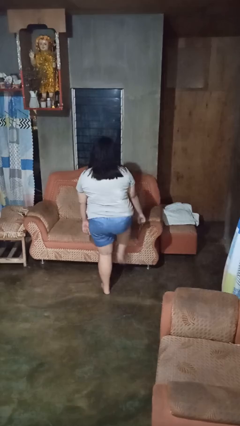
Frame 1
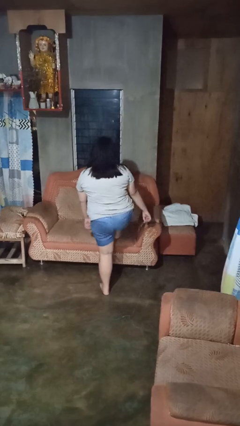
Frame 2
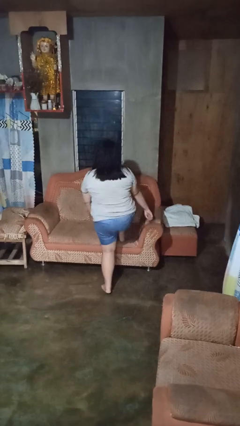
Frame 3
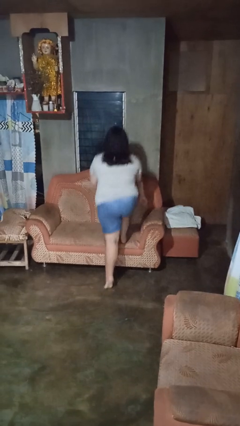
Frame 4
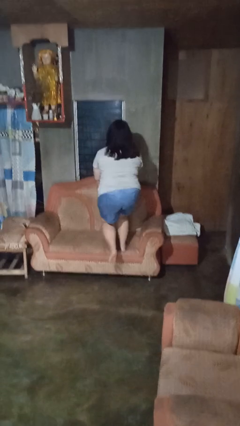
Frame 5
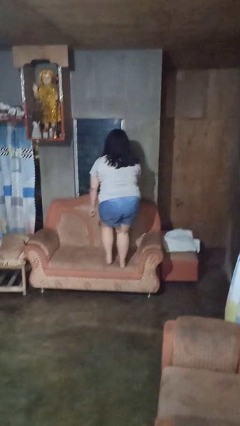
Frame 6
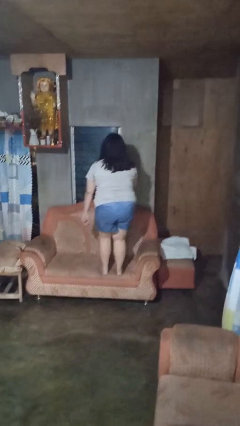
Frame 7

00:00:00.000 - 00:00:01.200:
person climbs on couch

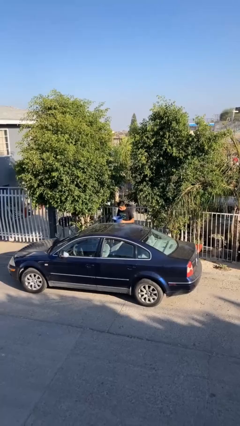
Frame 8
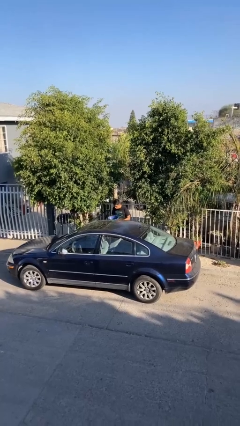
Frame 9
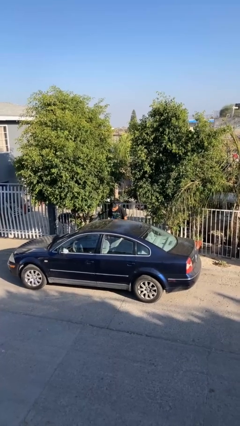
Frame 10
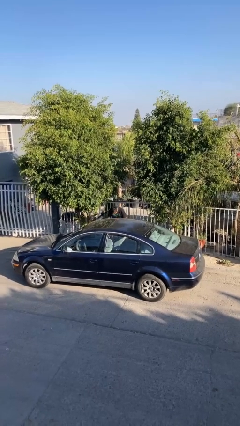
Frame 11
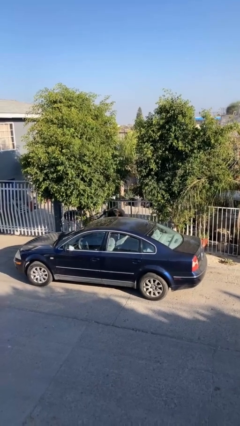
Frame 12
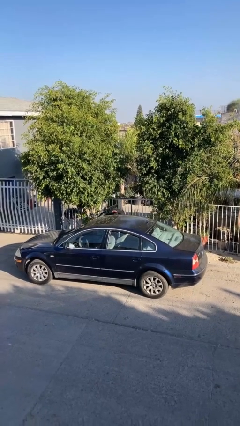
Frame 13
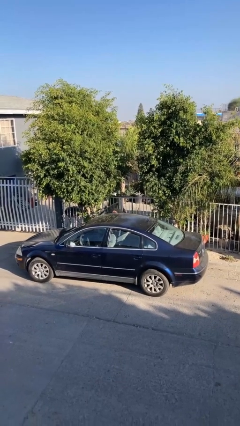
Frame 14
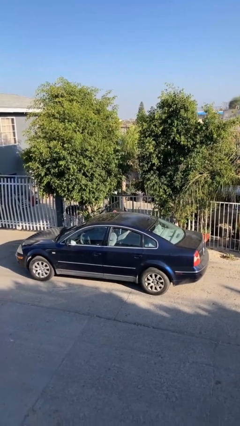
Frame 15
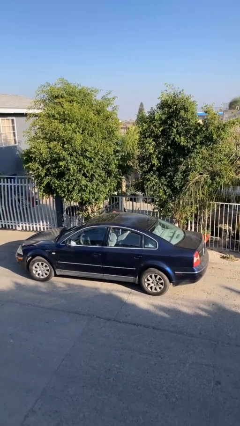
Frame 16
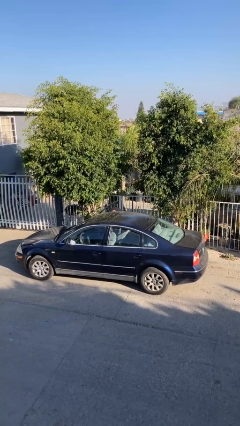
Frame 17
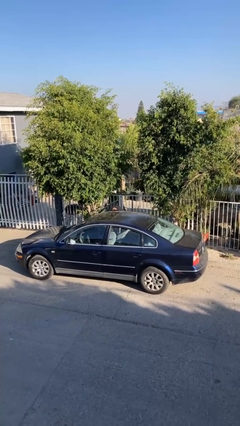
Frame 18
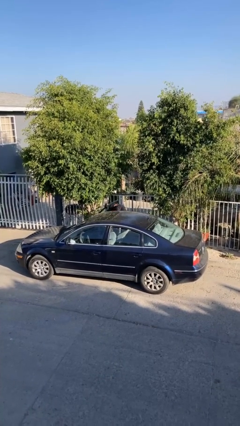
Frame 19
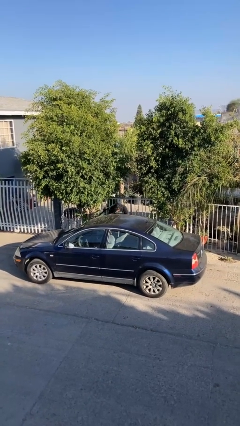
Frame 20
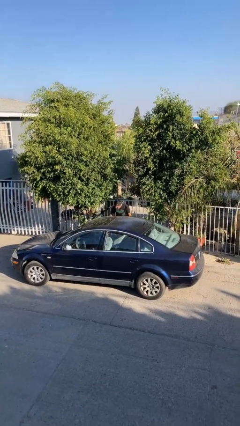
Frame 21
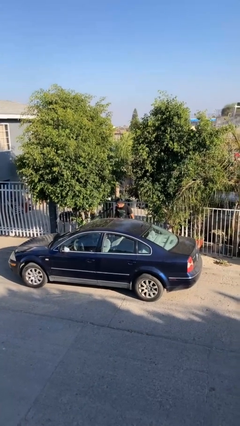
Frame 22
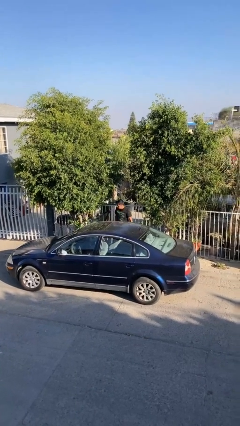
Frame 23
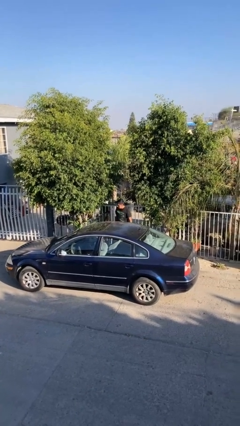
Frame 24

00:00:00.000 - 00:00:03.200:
person loads car

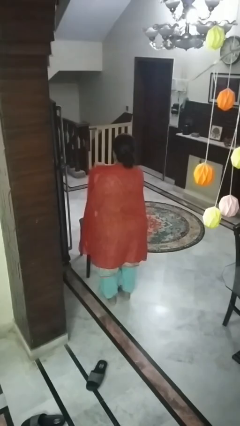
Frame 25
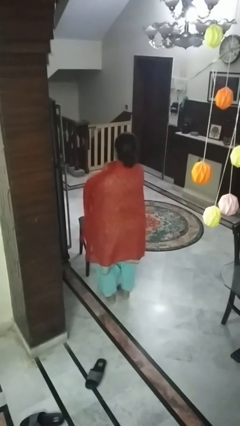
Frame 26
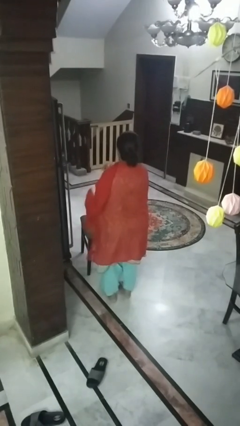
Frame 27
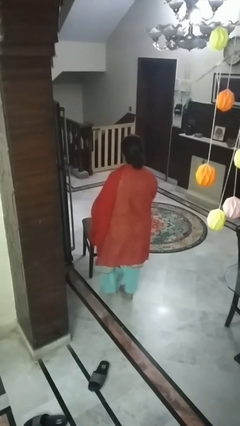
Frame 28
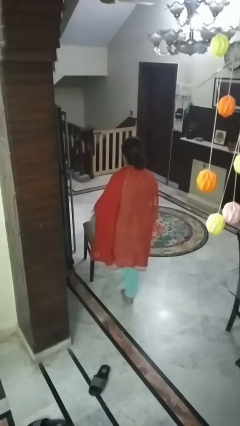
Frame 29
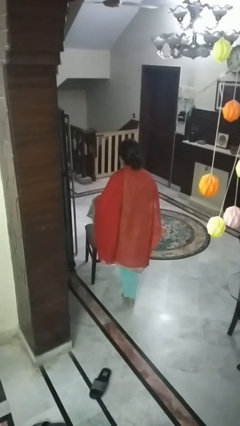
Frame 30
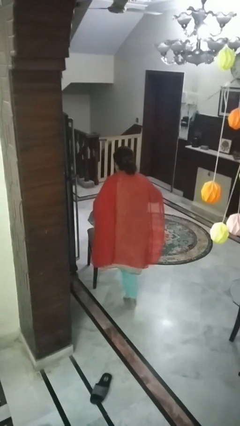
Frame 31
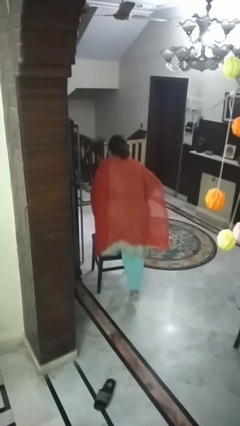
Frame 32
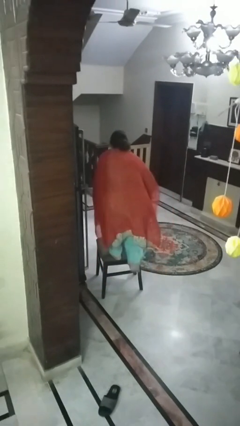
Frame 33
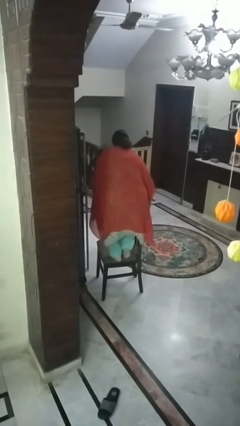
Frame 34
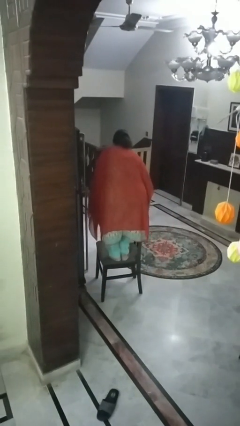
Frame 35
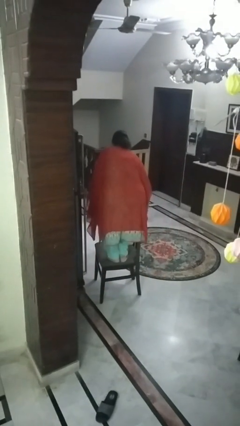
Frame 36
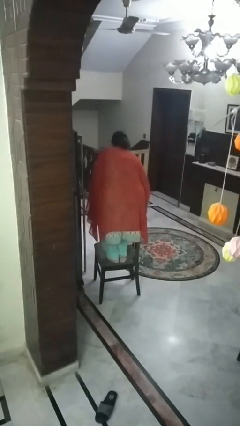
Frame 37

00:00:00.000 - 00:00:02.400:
person climbs on chair

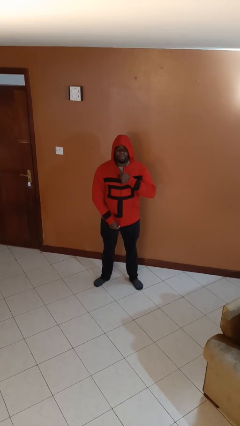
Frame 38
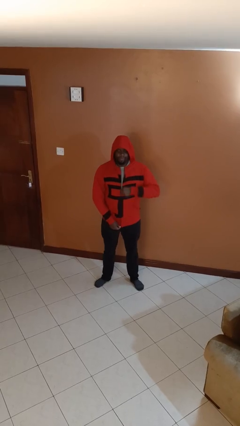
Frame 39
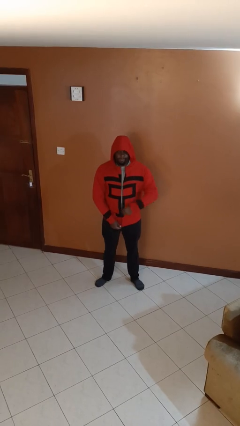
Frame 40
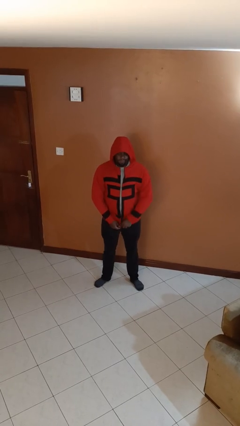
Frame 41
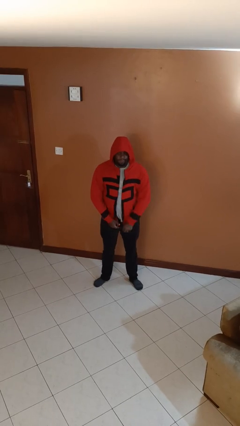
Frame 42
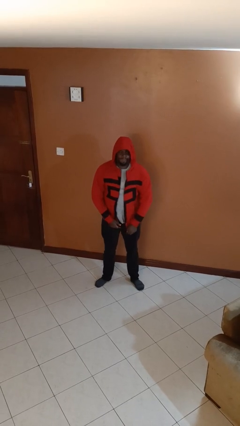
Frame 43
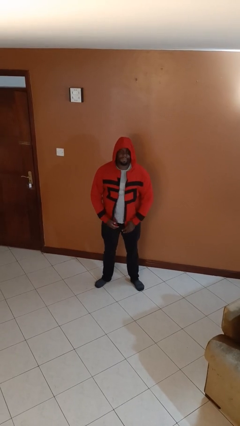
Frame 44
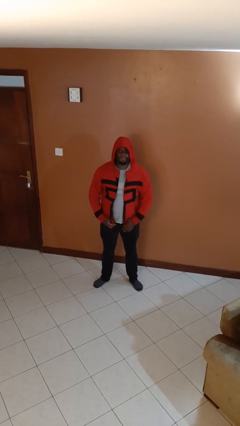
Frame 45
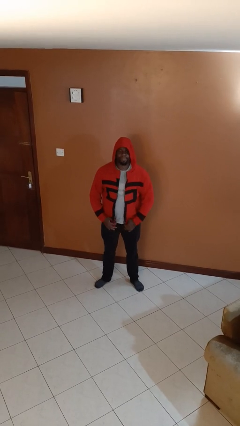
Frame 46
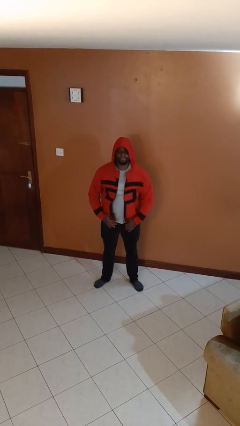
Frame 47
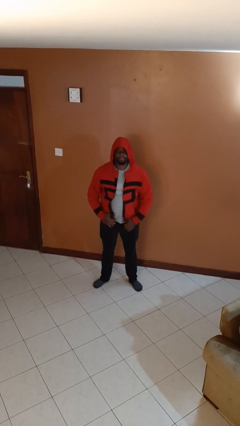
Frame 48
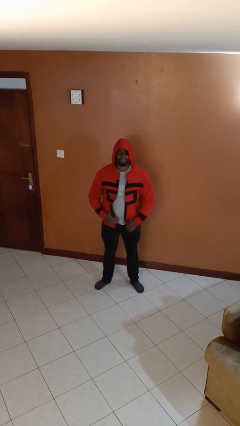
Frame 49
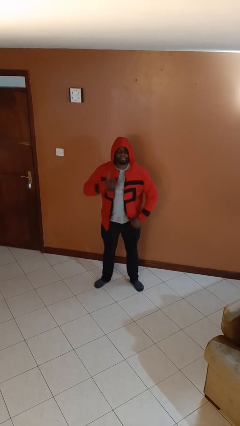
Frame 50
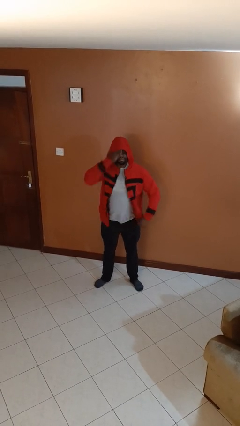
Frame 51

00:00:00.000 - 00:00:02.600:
person unzips jacket

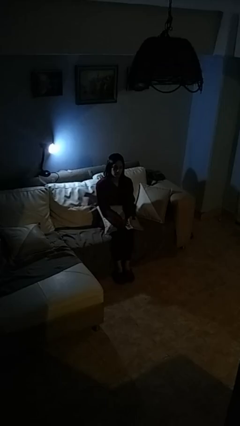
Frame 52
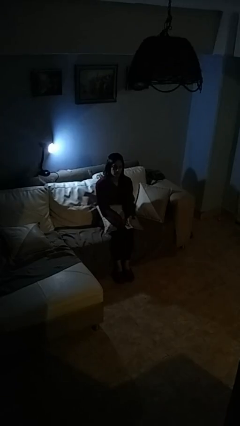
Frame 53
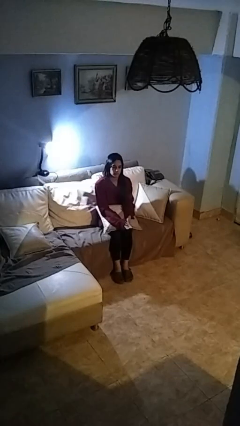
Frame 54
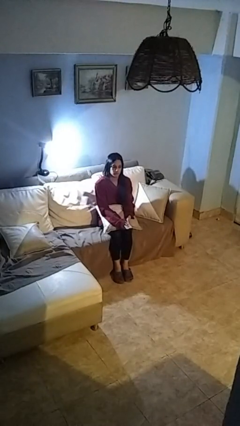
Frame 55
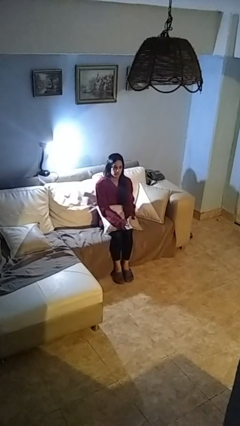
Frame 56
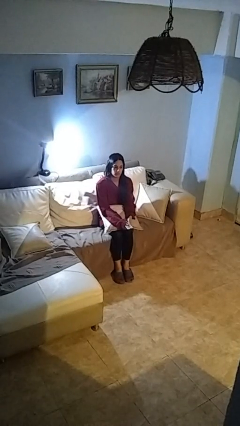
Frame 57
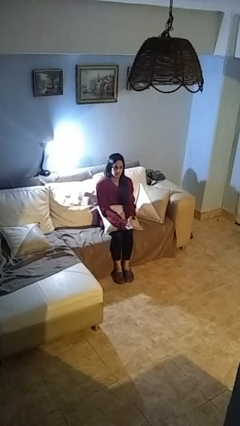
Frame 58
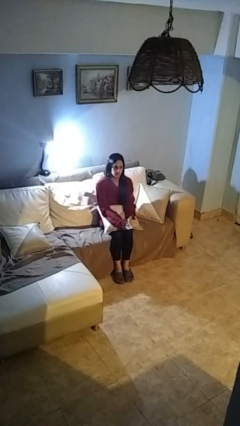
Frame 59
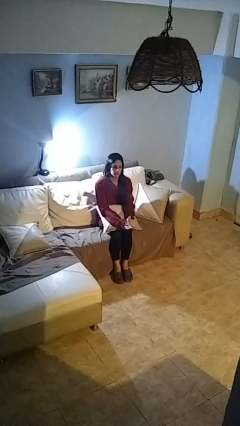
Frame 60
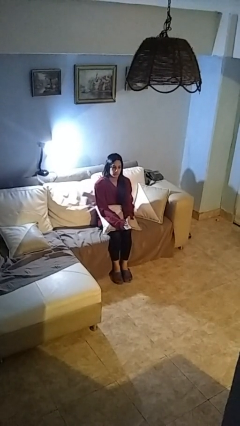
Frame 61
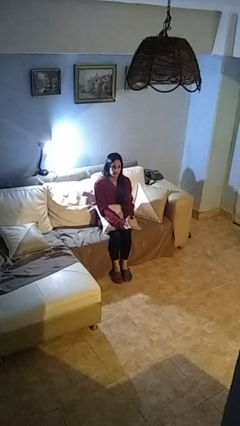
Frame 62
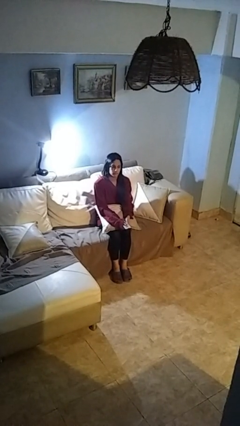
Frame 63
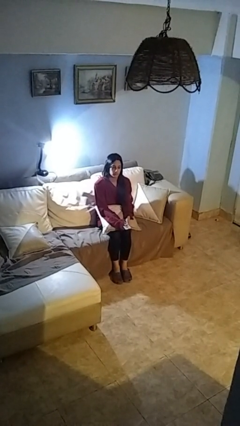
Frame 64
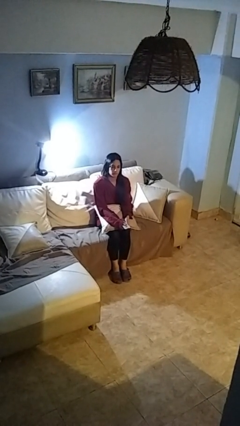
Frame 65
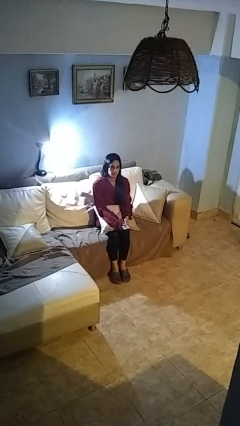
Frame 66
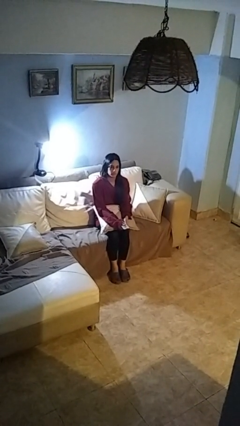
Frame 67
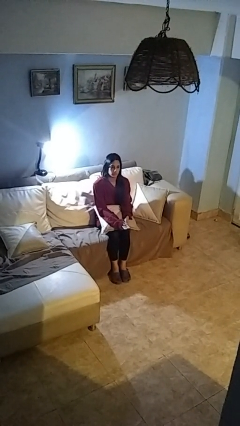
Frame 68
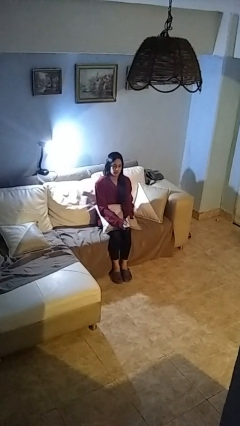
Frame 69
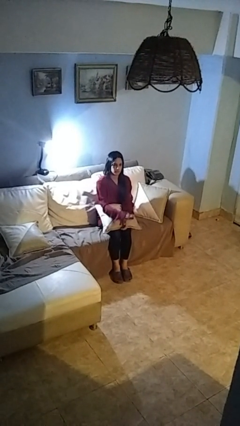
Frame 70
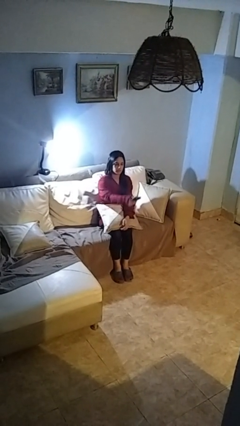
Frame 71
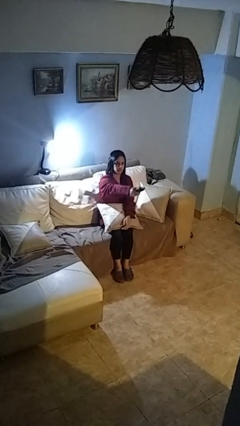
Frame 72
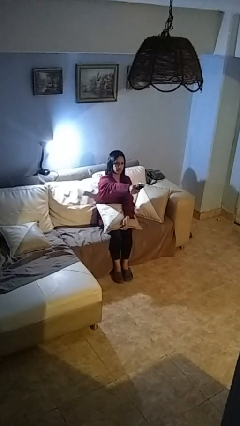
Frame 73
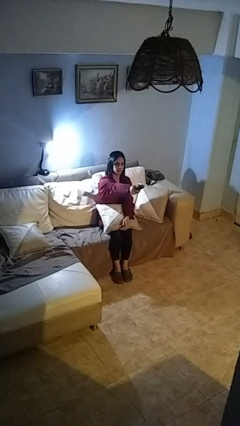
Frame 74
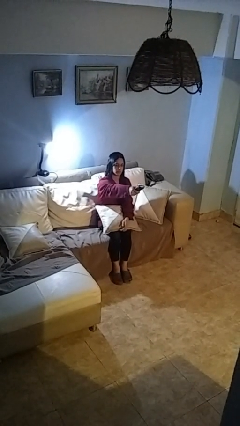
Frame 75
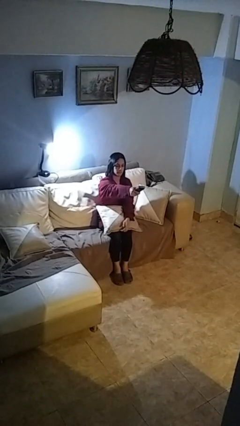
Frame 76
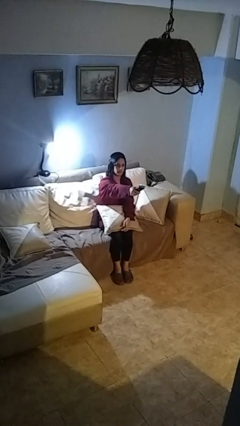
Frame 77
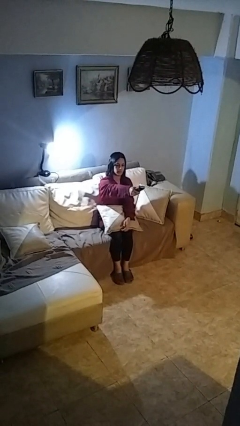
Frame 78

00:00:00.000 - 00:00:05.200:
person uses television remote

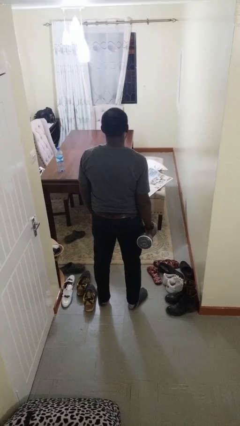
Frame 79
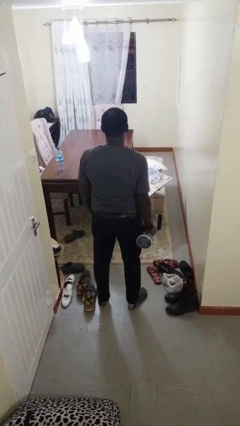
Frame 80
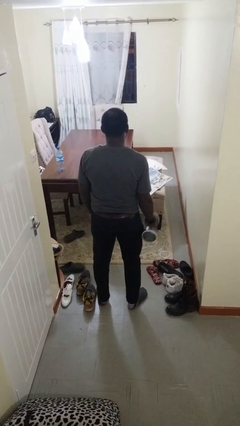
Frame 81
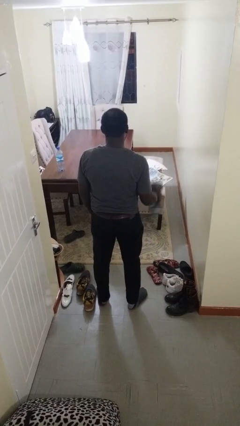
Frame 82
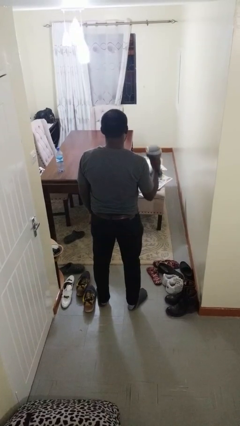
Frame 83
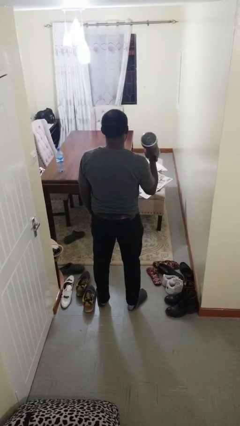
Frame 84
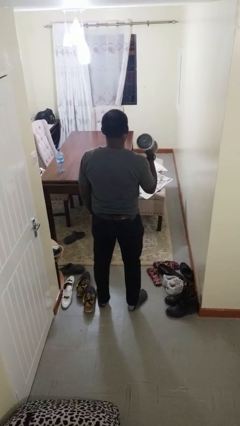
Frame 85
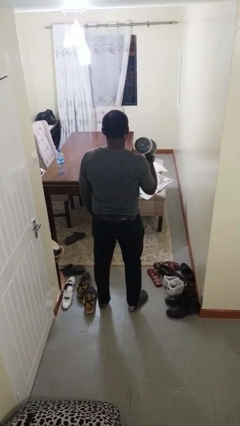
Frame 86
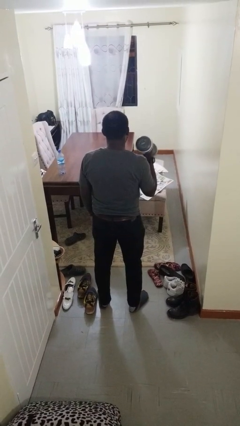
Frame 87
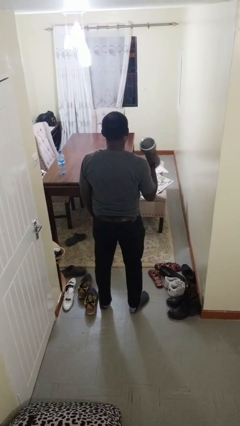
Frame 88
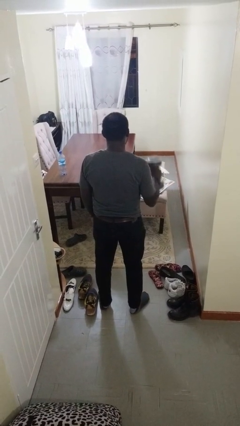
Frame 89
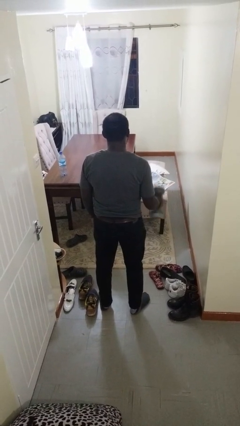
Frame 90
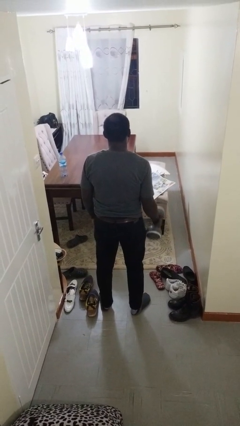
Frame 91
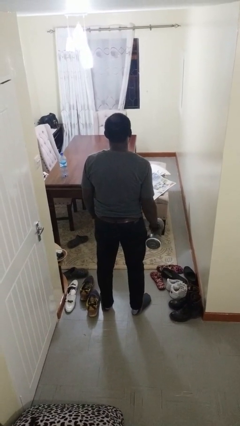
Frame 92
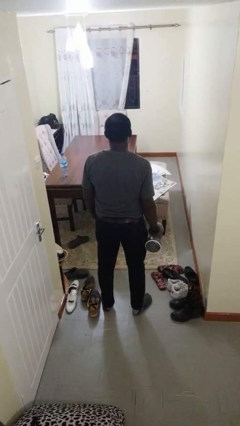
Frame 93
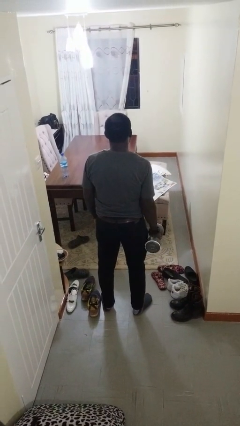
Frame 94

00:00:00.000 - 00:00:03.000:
person lifts dumbbells
